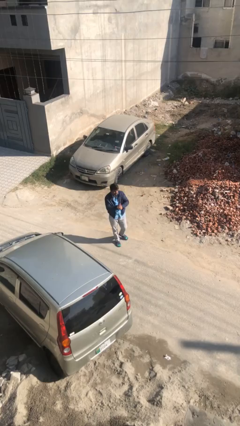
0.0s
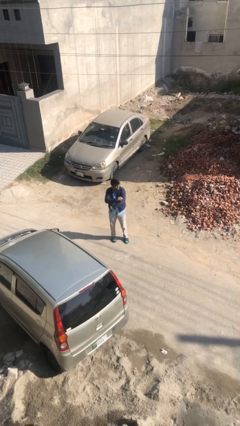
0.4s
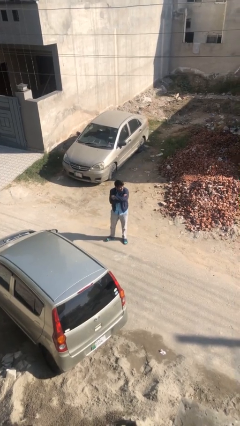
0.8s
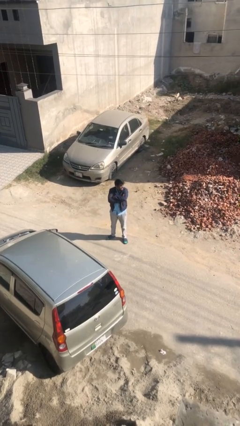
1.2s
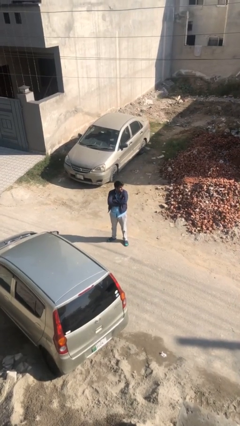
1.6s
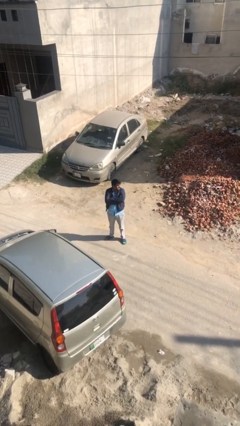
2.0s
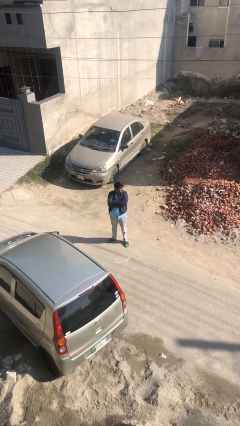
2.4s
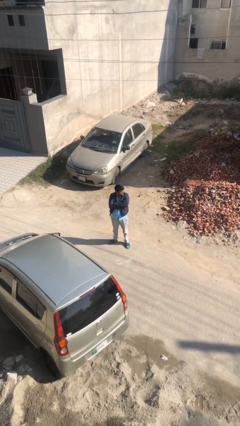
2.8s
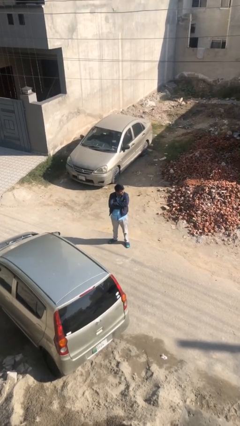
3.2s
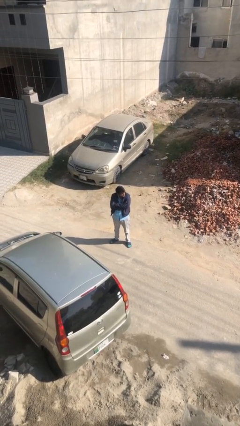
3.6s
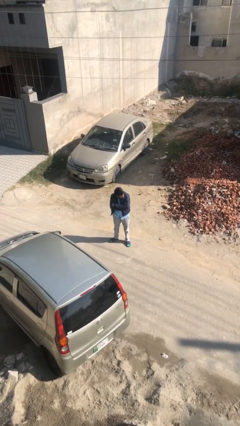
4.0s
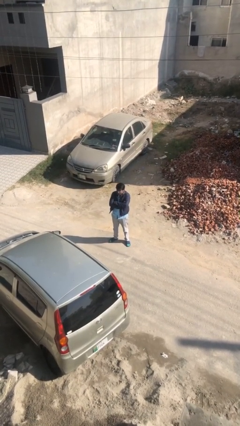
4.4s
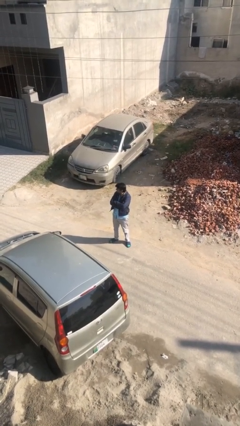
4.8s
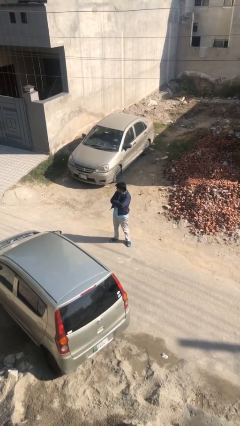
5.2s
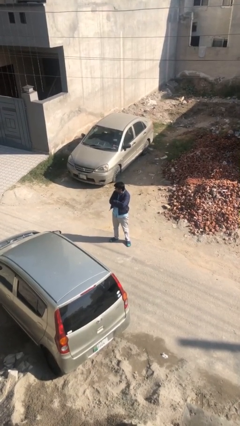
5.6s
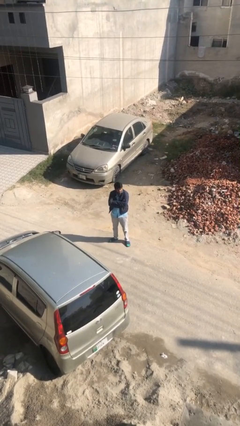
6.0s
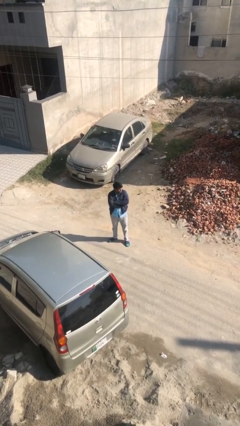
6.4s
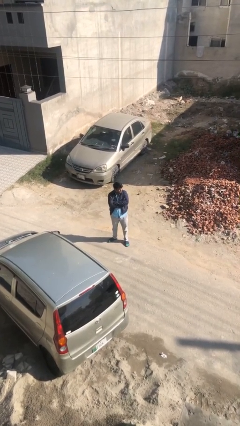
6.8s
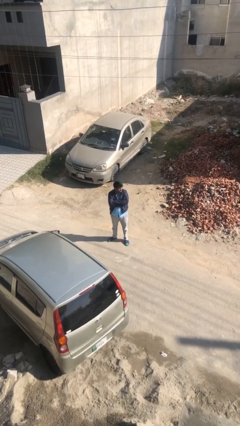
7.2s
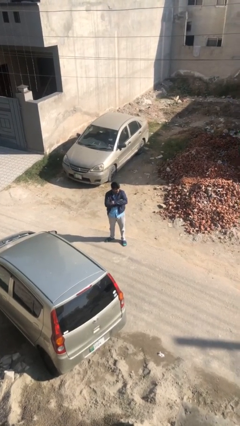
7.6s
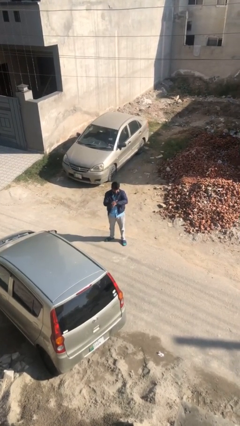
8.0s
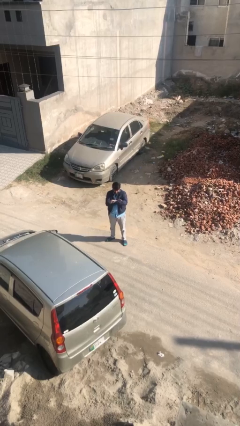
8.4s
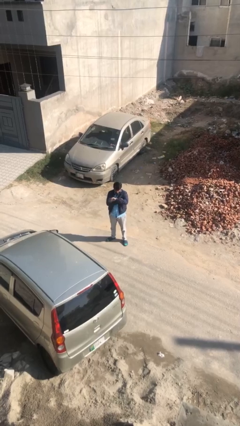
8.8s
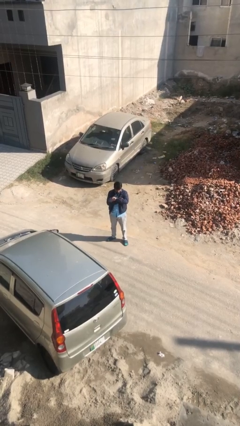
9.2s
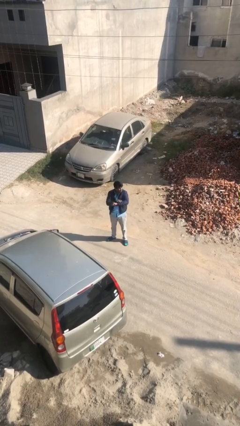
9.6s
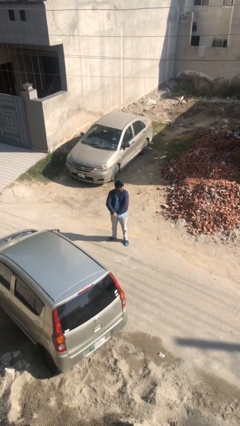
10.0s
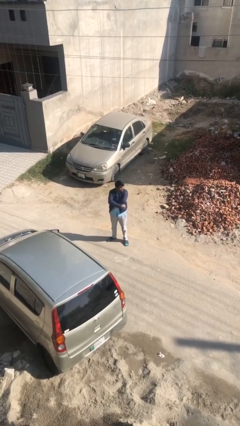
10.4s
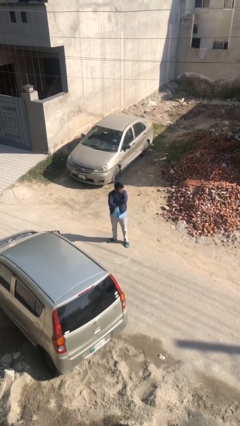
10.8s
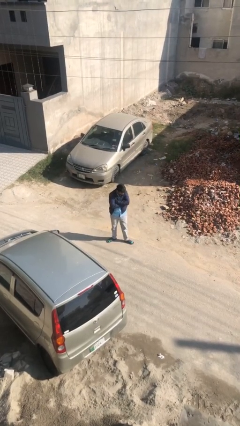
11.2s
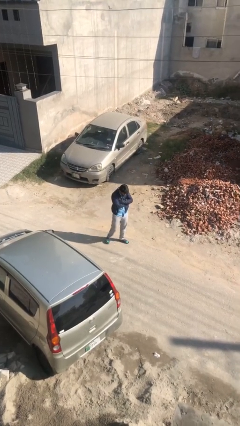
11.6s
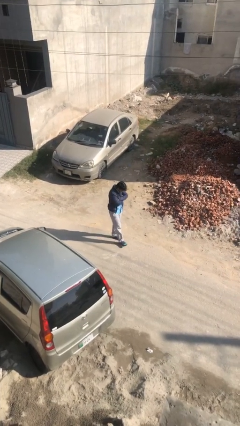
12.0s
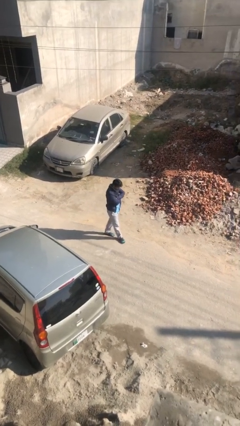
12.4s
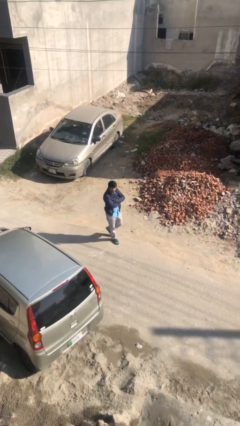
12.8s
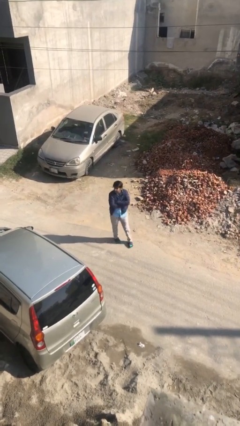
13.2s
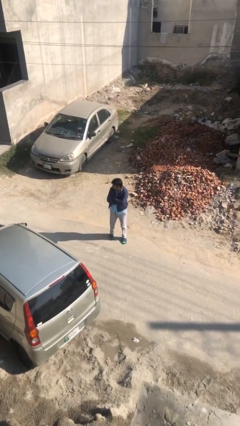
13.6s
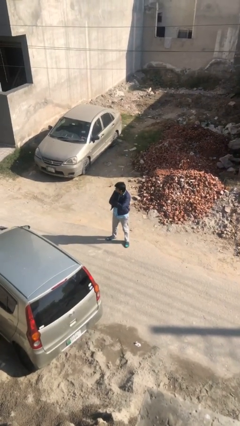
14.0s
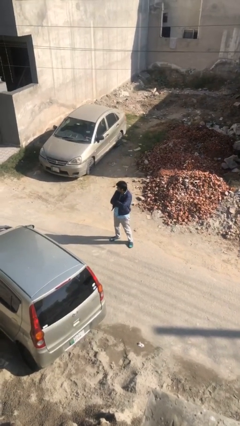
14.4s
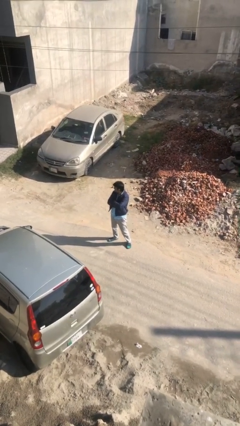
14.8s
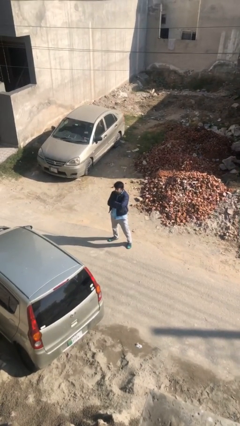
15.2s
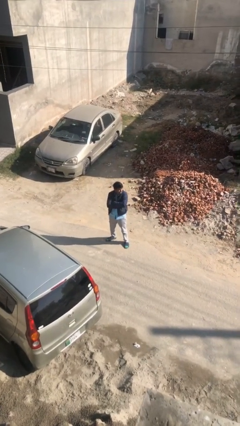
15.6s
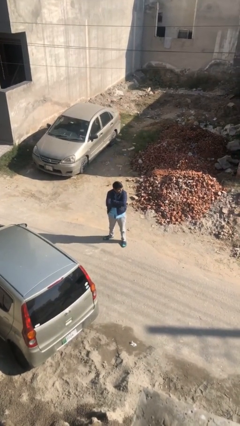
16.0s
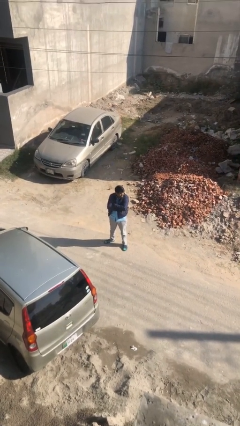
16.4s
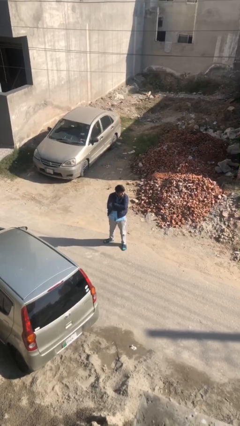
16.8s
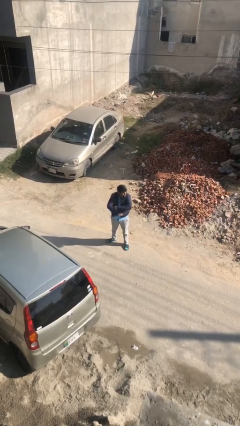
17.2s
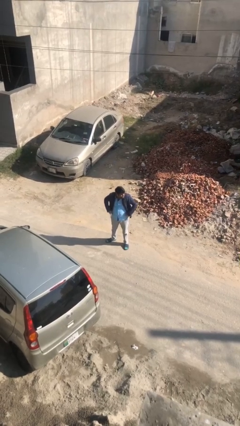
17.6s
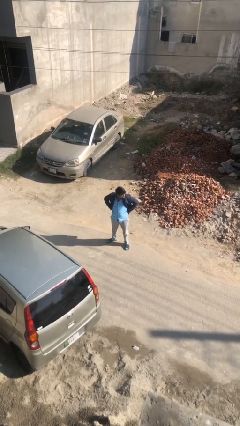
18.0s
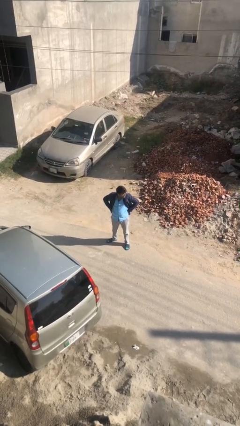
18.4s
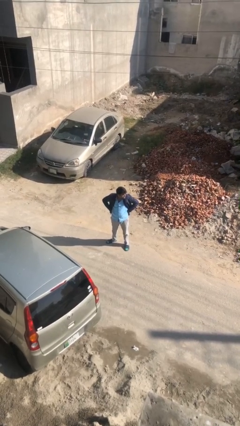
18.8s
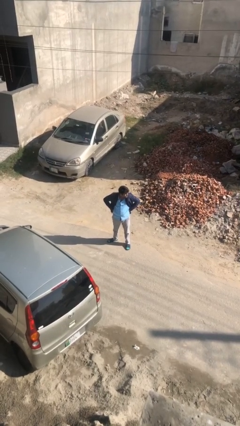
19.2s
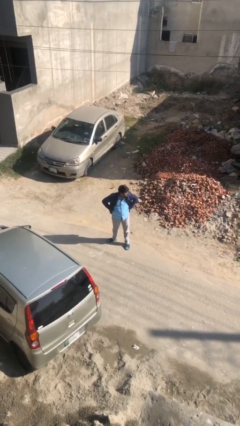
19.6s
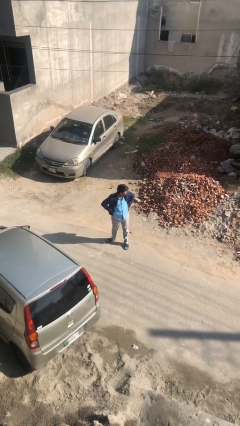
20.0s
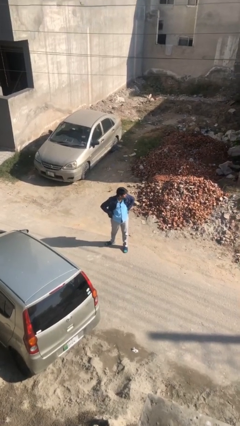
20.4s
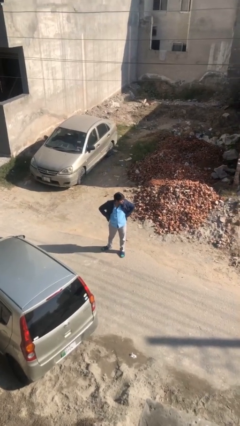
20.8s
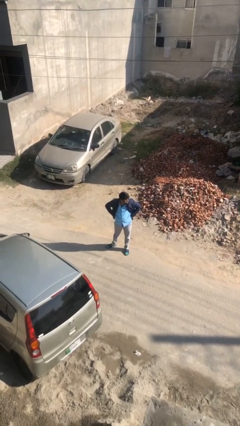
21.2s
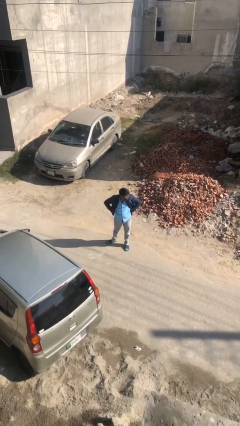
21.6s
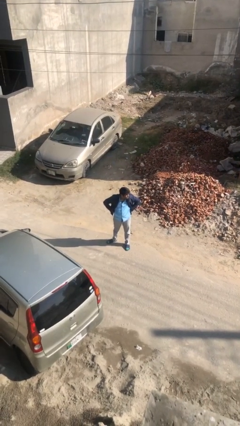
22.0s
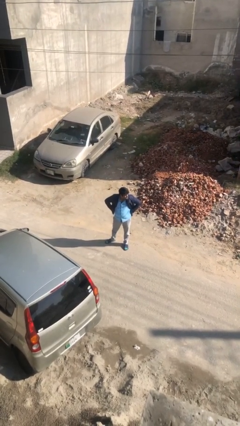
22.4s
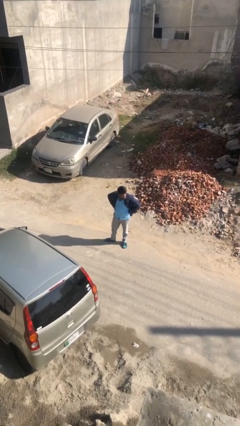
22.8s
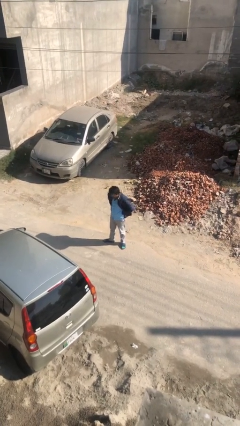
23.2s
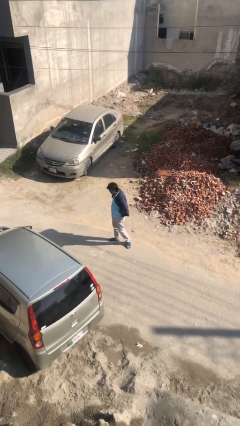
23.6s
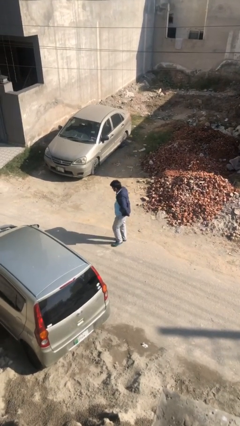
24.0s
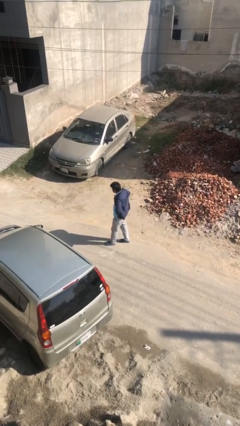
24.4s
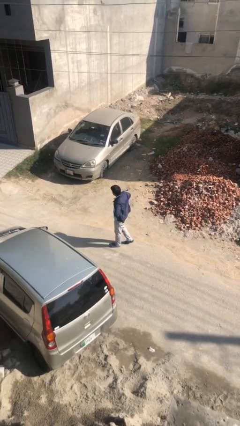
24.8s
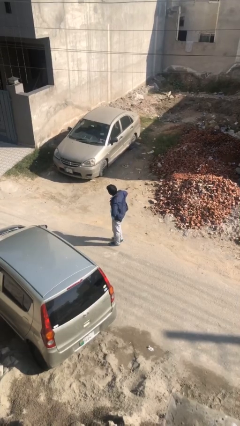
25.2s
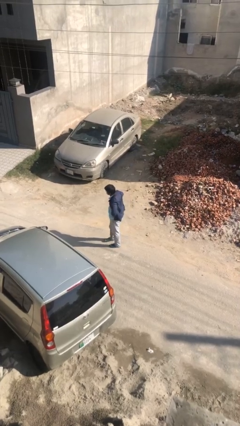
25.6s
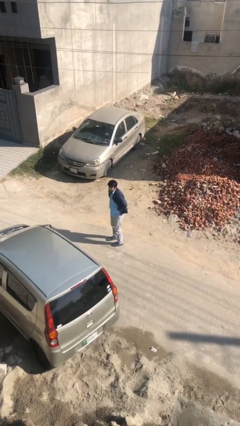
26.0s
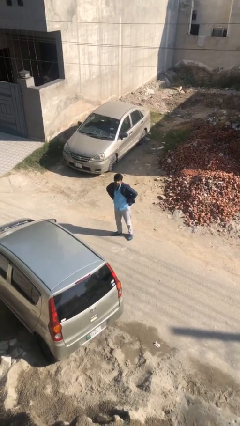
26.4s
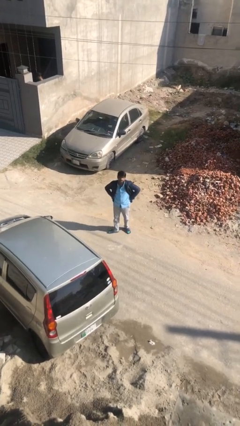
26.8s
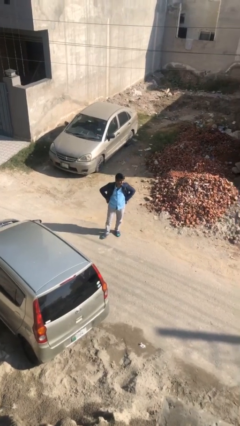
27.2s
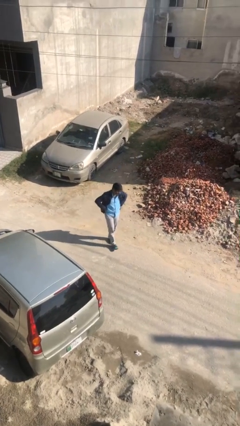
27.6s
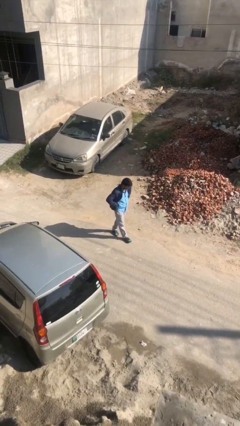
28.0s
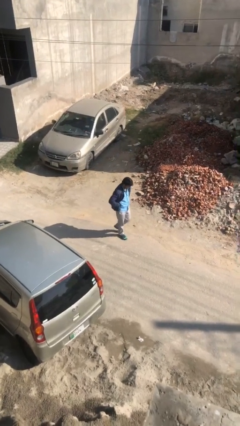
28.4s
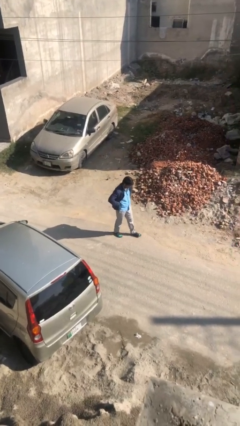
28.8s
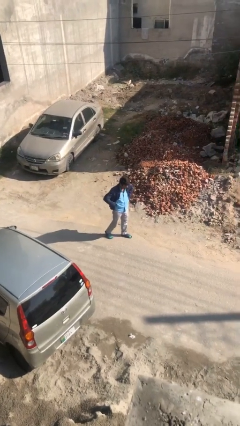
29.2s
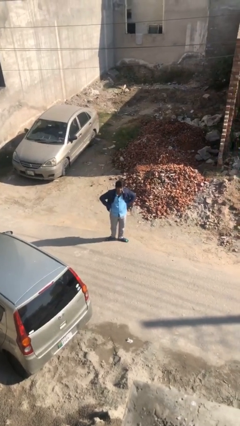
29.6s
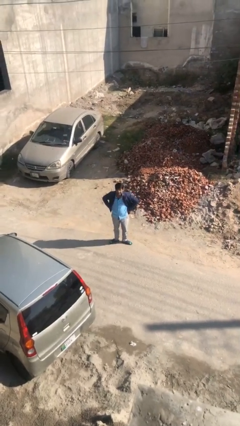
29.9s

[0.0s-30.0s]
person walks

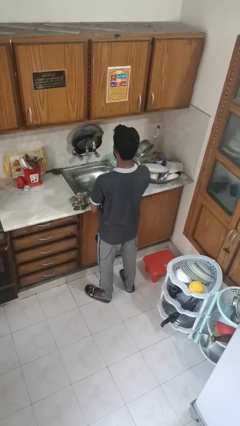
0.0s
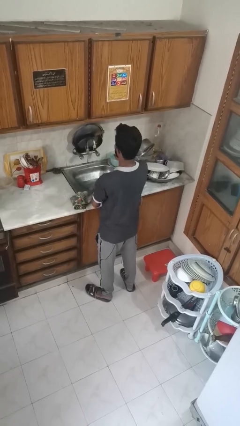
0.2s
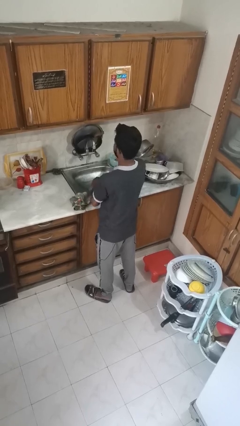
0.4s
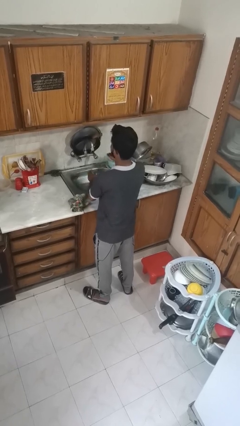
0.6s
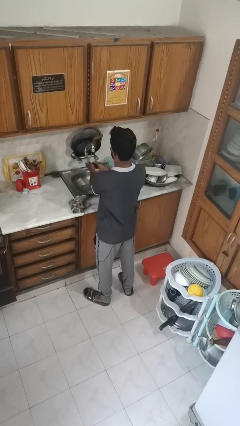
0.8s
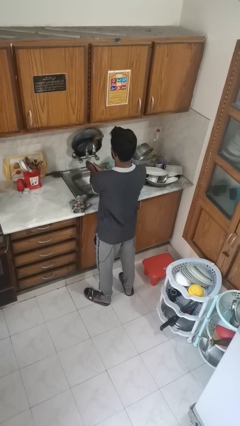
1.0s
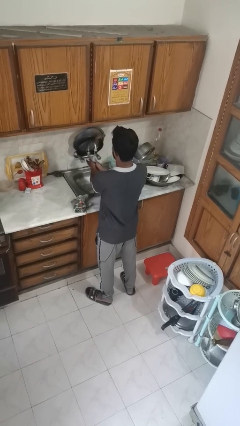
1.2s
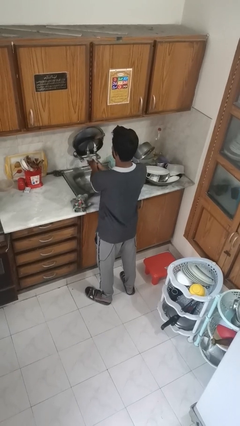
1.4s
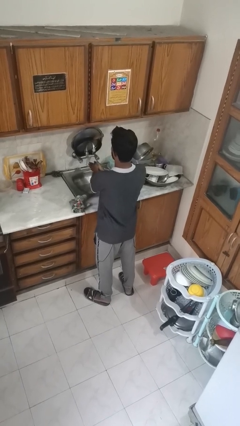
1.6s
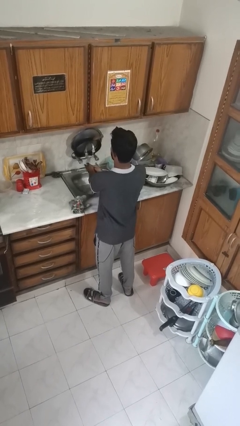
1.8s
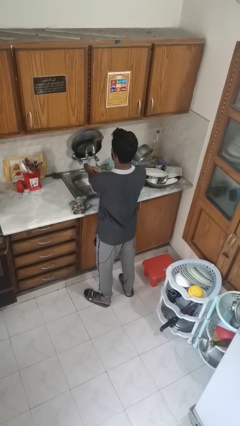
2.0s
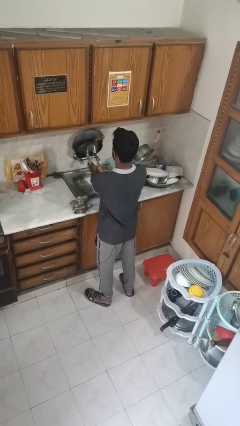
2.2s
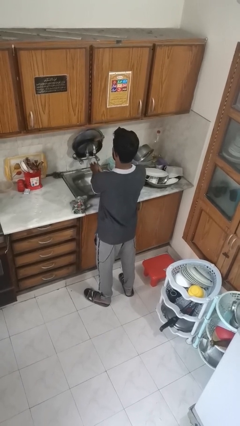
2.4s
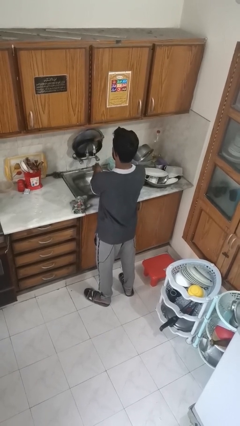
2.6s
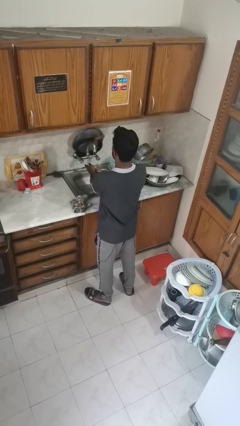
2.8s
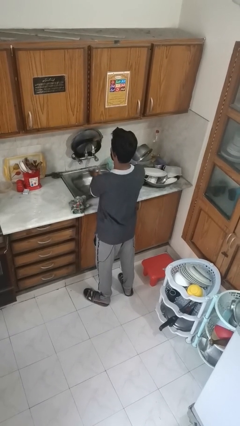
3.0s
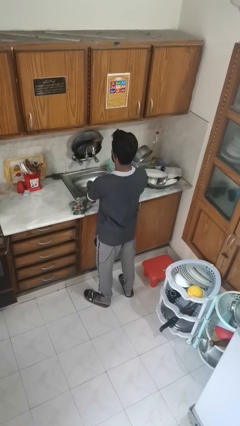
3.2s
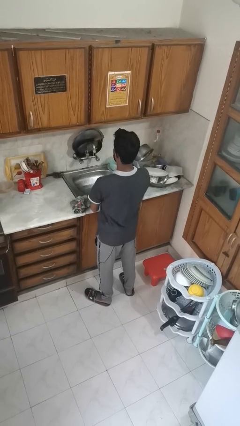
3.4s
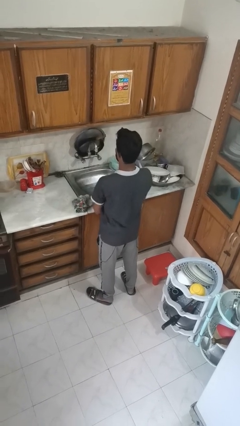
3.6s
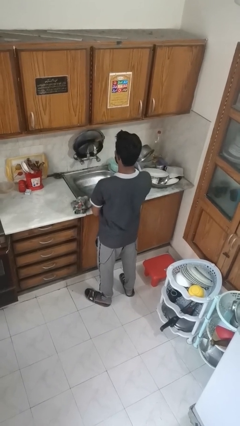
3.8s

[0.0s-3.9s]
person washes hands
